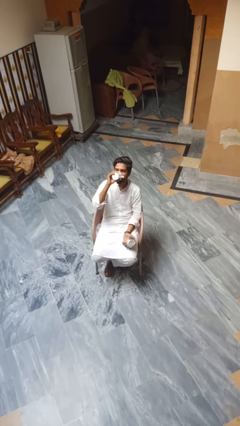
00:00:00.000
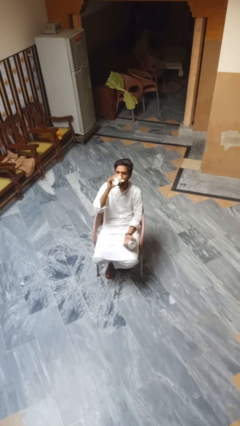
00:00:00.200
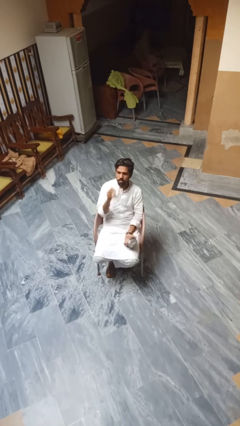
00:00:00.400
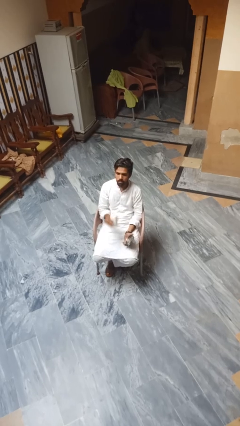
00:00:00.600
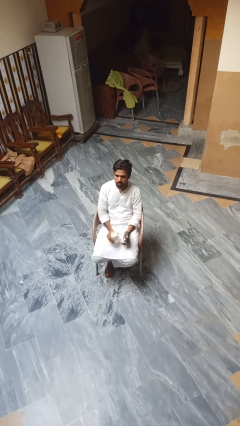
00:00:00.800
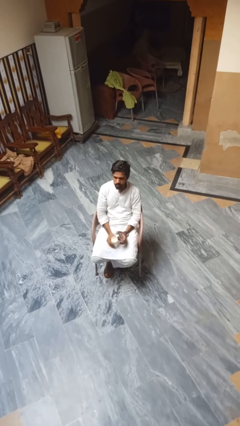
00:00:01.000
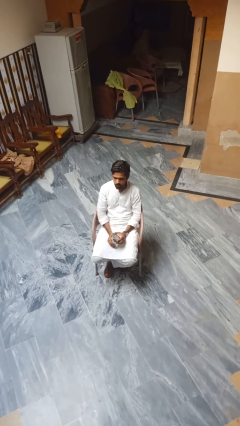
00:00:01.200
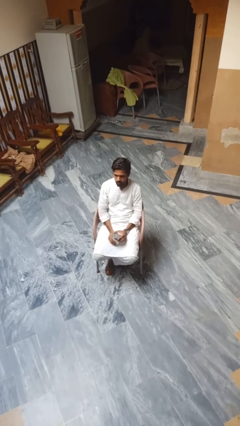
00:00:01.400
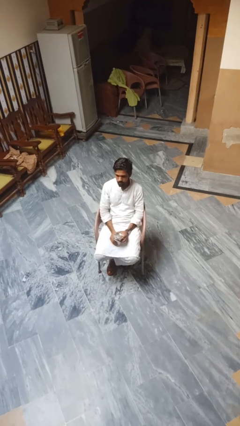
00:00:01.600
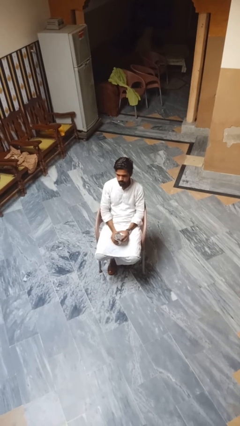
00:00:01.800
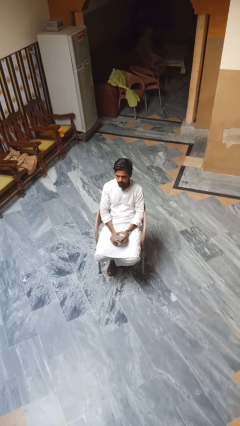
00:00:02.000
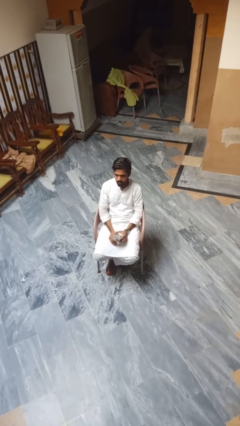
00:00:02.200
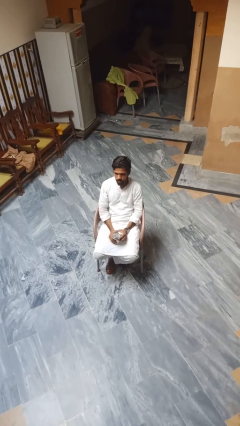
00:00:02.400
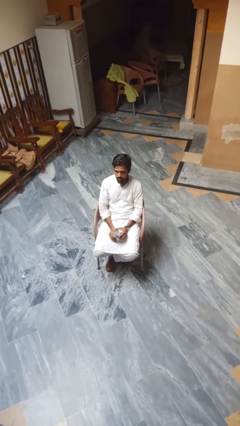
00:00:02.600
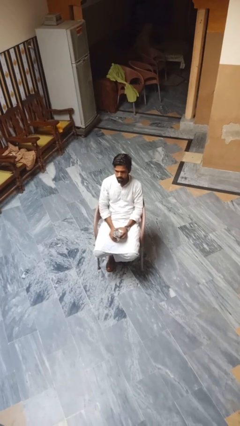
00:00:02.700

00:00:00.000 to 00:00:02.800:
person drinks from beverage can

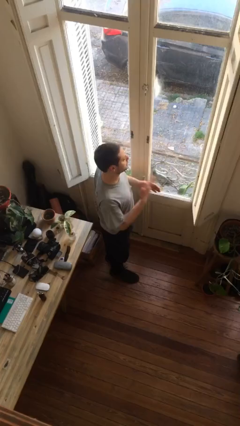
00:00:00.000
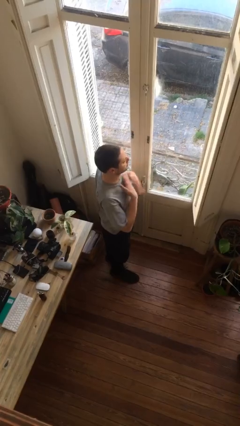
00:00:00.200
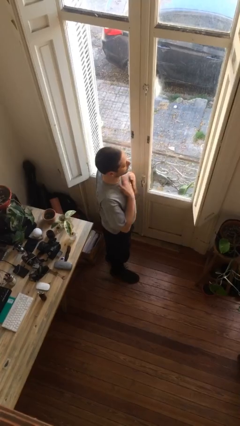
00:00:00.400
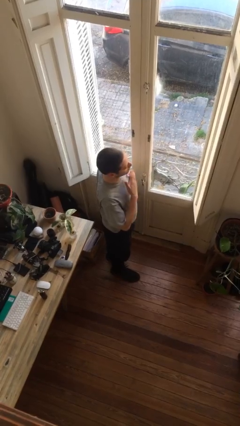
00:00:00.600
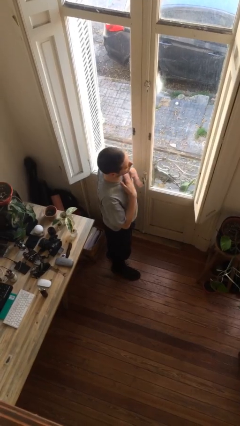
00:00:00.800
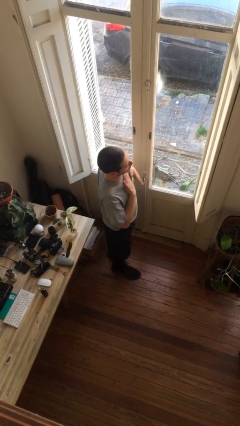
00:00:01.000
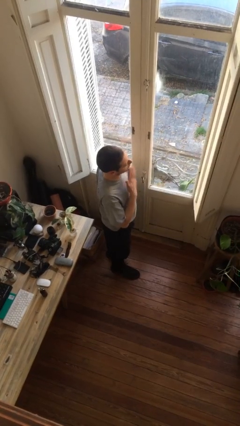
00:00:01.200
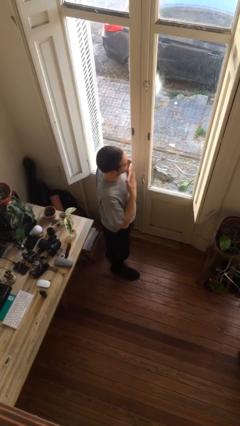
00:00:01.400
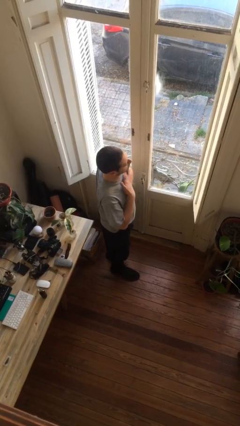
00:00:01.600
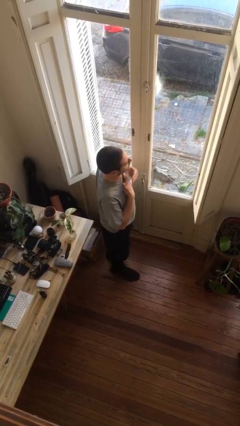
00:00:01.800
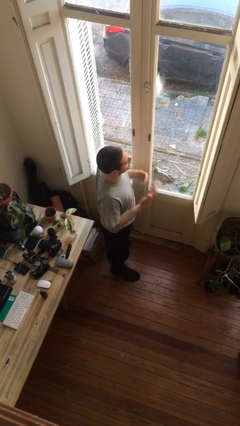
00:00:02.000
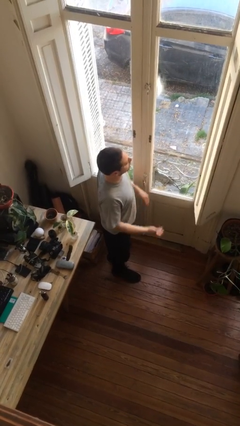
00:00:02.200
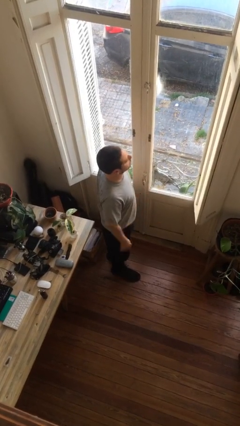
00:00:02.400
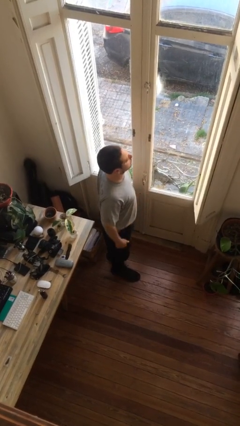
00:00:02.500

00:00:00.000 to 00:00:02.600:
person drums on chest

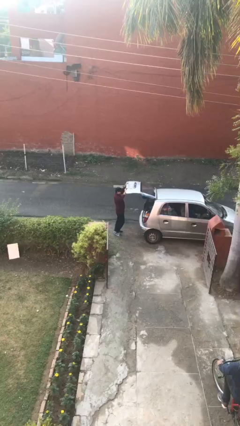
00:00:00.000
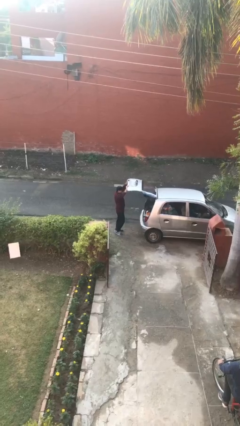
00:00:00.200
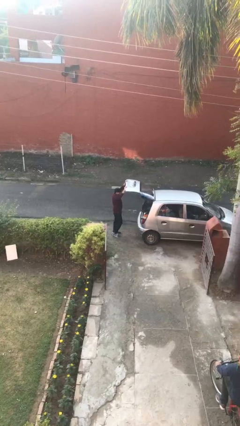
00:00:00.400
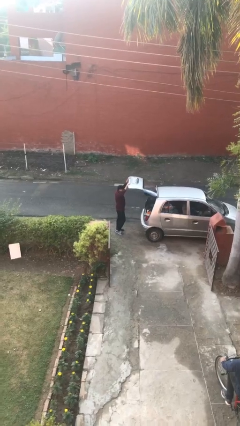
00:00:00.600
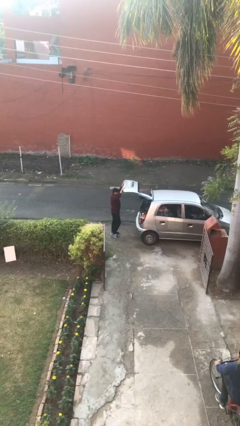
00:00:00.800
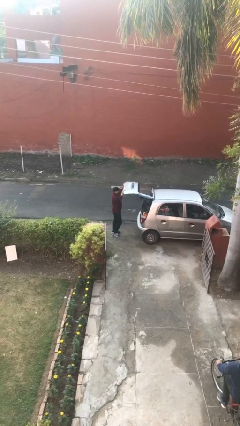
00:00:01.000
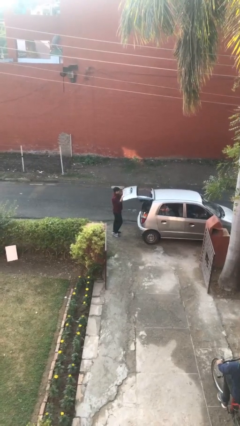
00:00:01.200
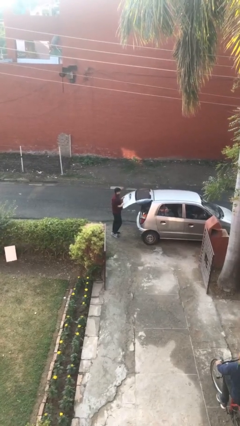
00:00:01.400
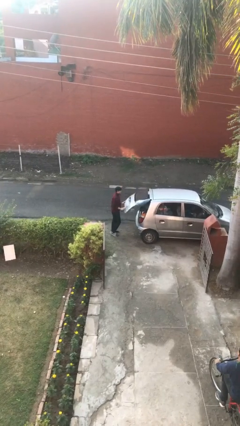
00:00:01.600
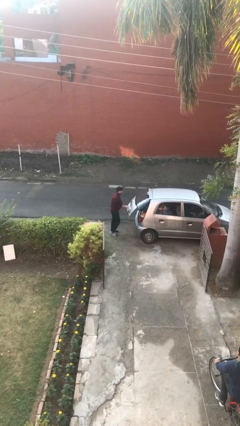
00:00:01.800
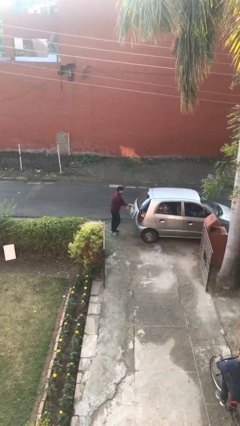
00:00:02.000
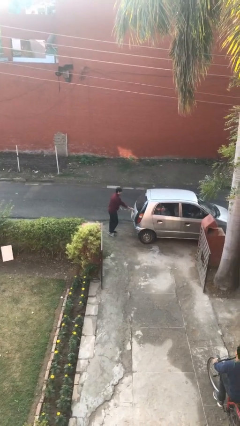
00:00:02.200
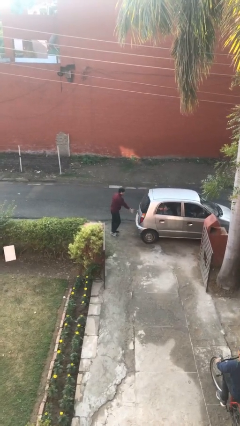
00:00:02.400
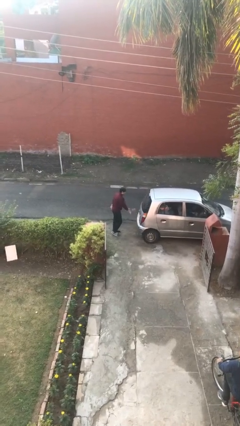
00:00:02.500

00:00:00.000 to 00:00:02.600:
person closes car trunk

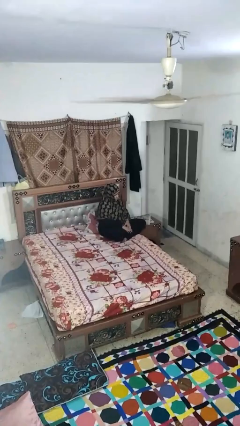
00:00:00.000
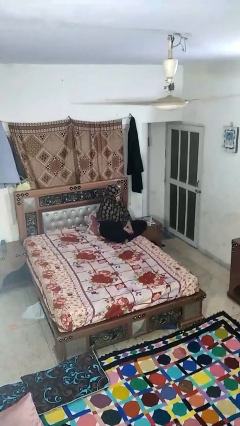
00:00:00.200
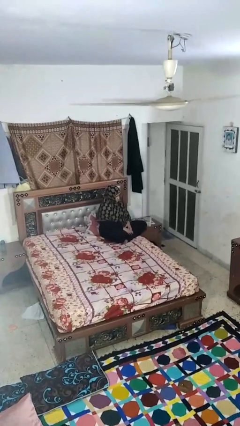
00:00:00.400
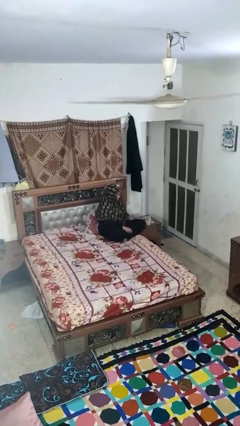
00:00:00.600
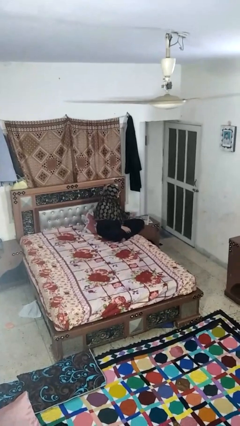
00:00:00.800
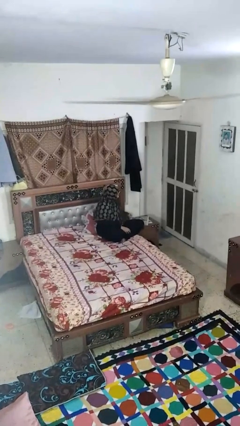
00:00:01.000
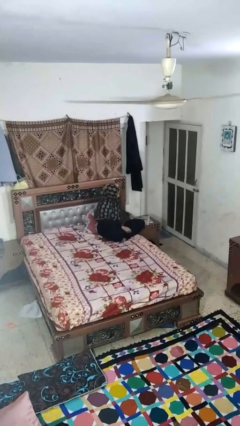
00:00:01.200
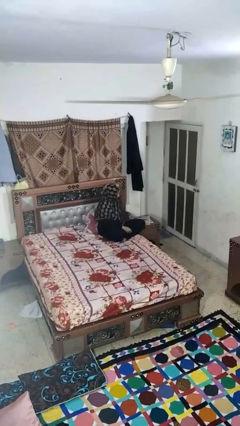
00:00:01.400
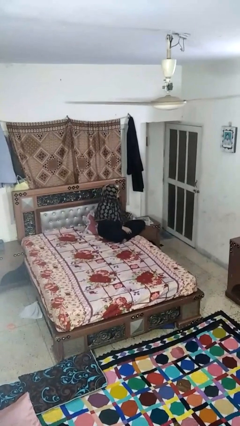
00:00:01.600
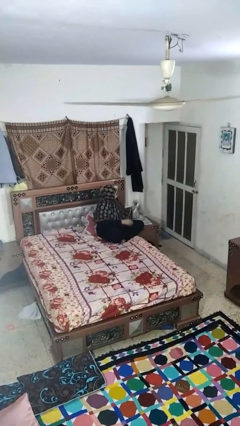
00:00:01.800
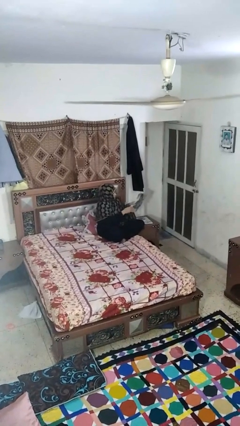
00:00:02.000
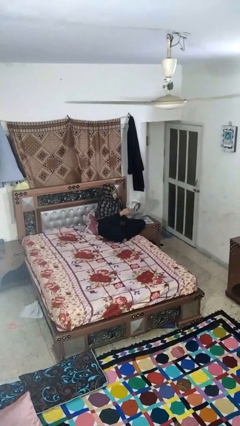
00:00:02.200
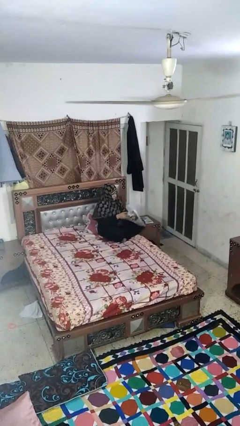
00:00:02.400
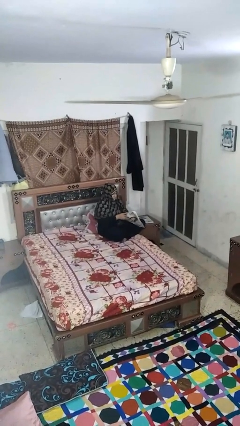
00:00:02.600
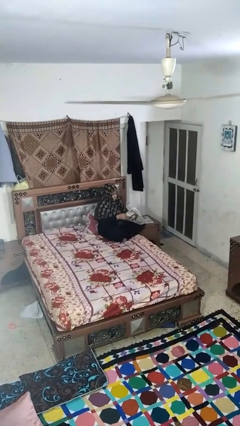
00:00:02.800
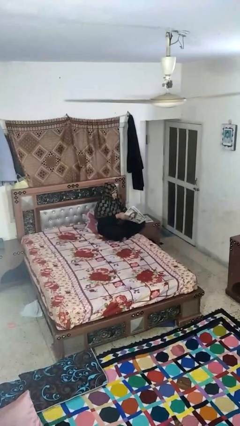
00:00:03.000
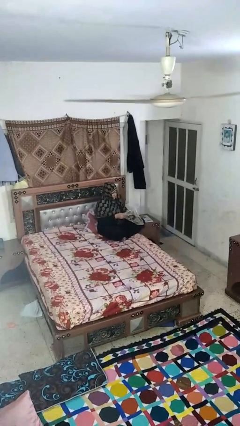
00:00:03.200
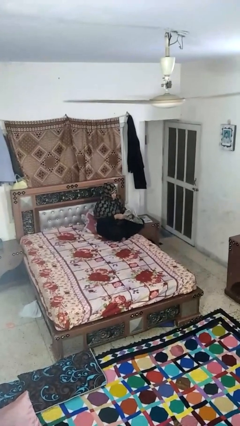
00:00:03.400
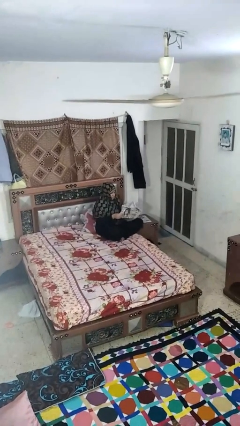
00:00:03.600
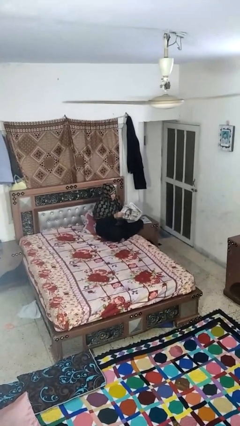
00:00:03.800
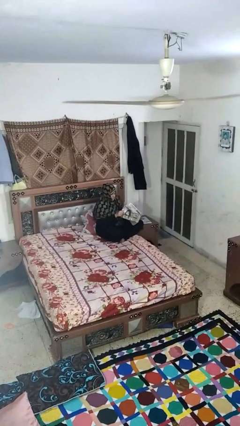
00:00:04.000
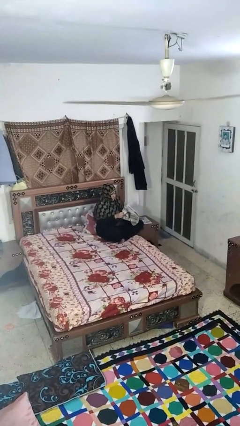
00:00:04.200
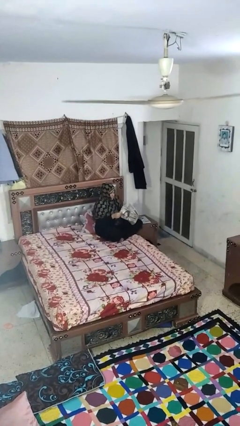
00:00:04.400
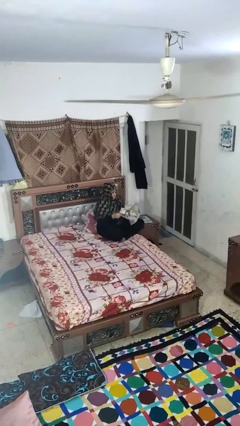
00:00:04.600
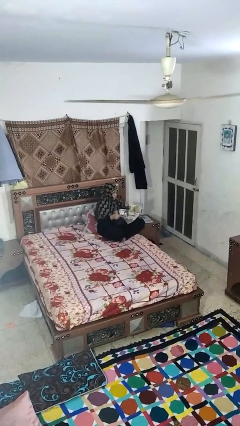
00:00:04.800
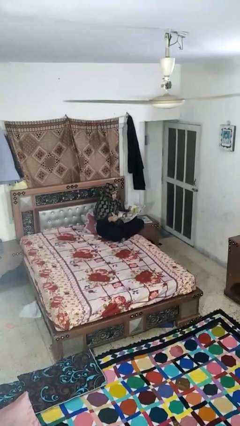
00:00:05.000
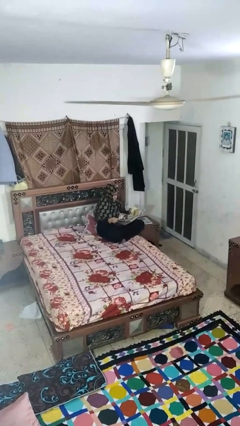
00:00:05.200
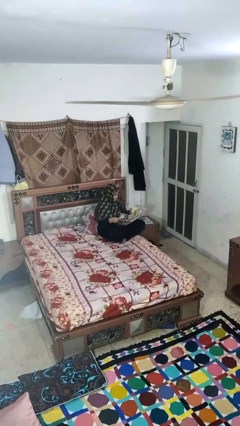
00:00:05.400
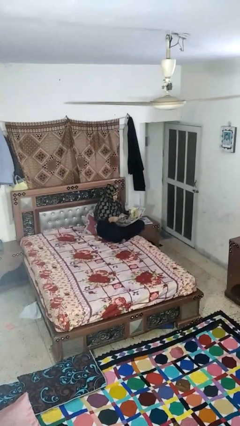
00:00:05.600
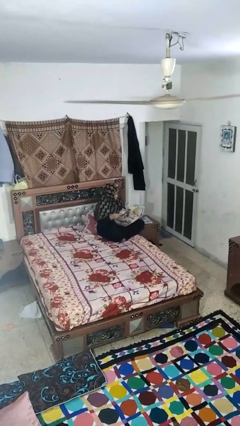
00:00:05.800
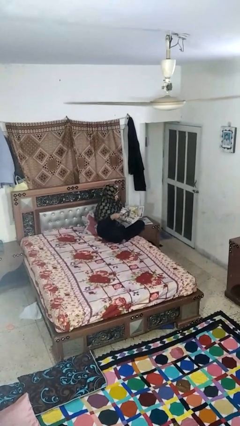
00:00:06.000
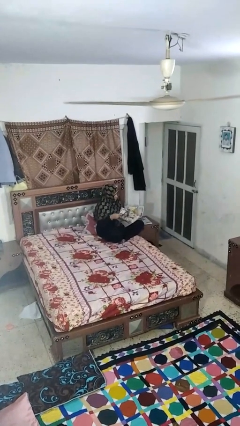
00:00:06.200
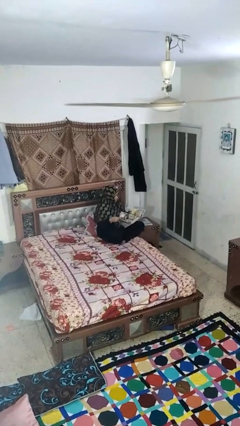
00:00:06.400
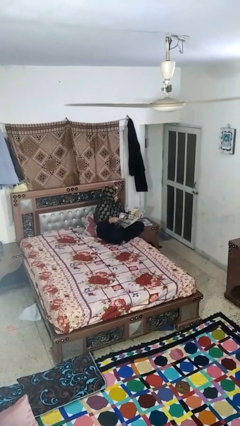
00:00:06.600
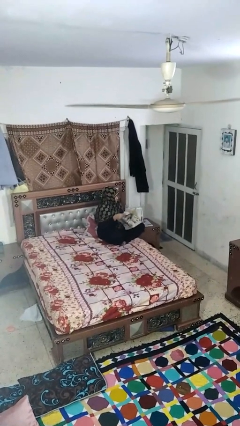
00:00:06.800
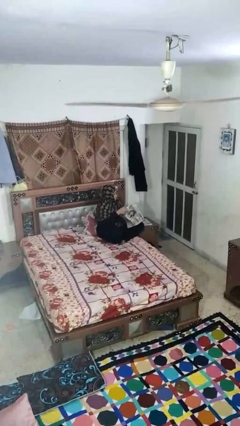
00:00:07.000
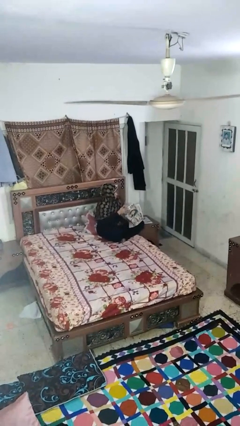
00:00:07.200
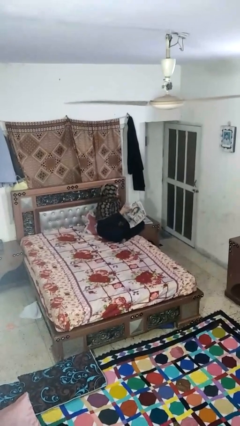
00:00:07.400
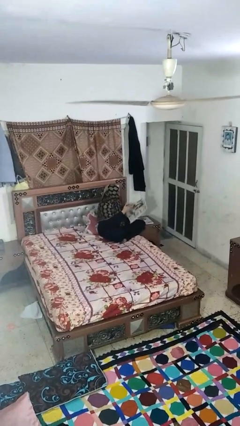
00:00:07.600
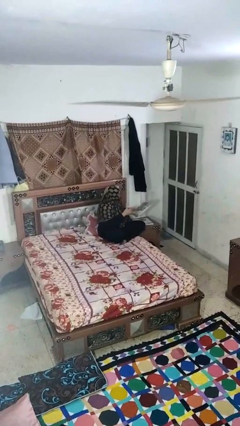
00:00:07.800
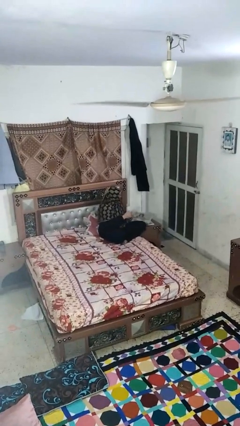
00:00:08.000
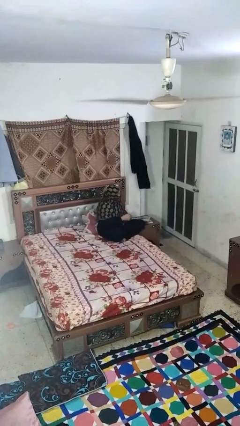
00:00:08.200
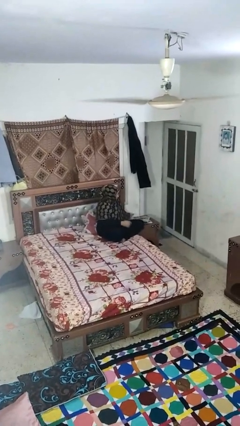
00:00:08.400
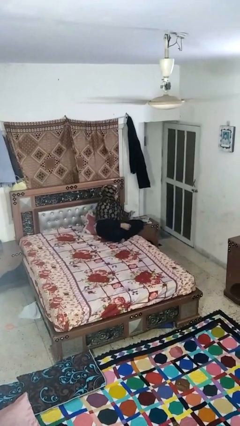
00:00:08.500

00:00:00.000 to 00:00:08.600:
person reads magazine

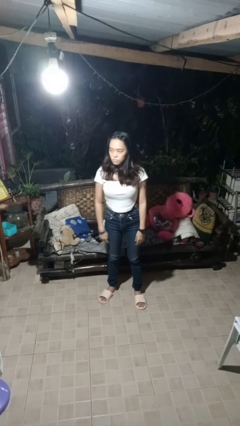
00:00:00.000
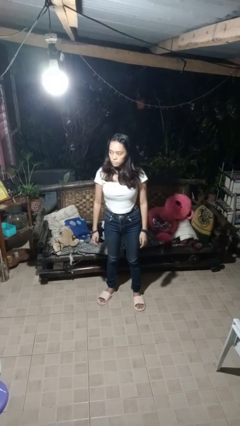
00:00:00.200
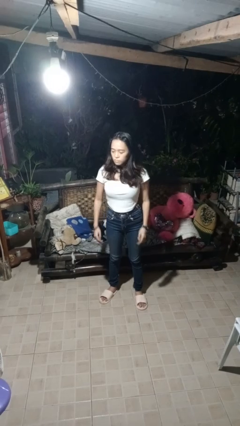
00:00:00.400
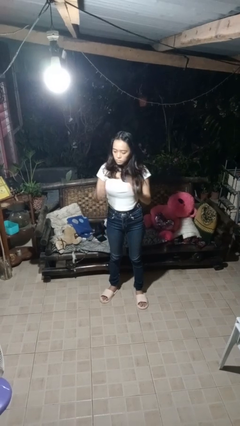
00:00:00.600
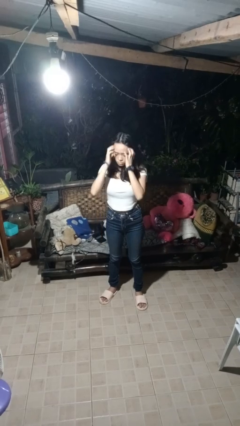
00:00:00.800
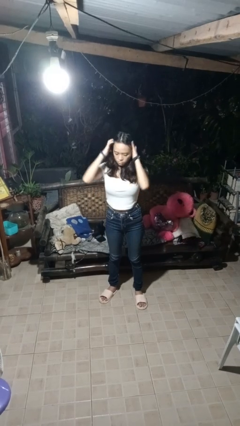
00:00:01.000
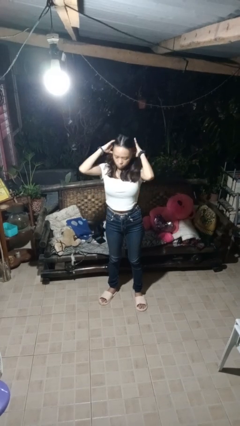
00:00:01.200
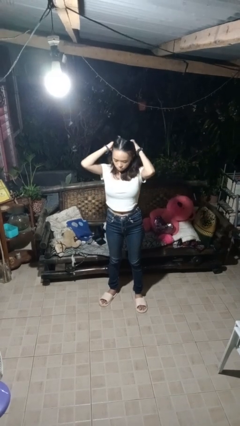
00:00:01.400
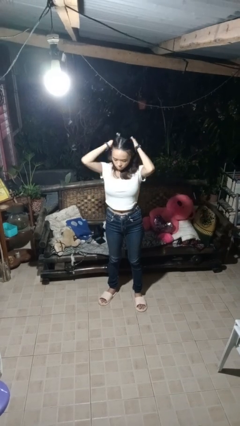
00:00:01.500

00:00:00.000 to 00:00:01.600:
person strokes hair
